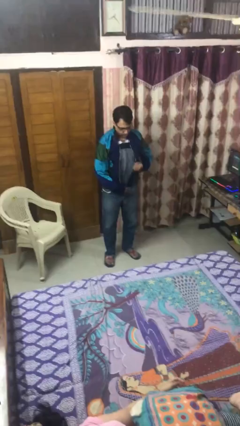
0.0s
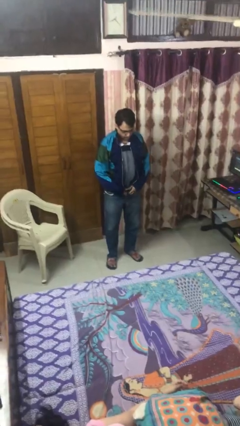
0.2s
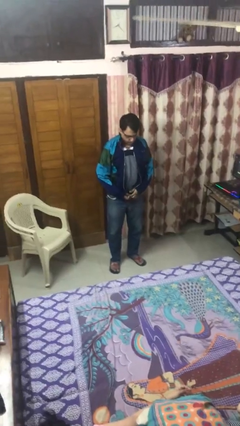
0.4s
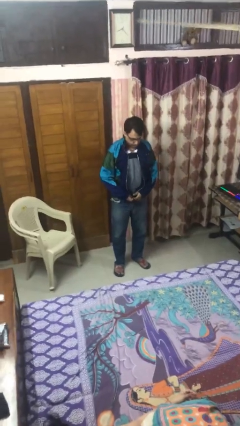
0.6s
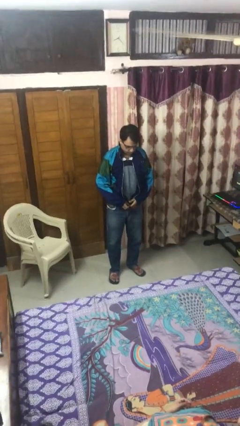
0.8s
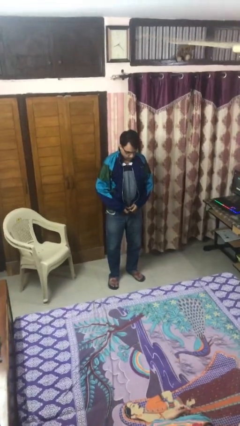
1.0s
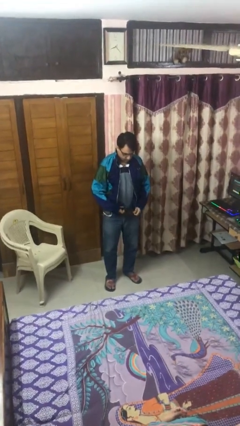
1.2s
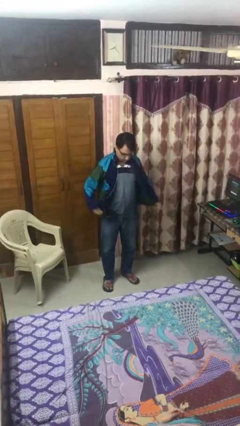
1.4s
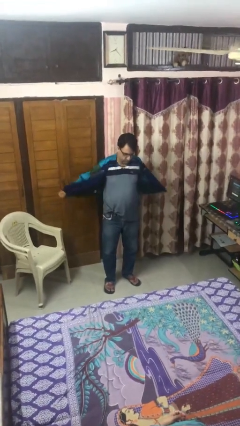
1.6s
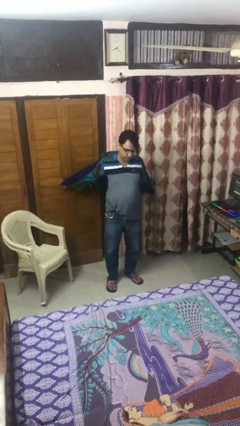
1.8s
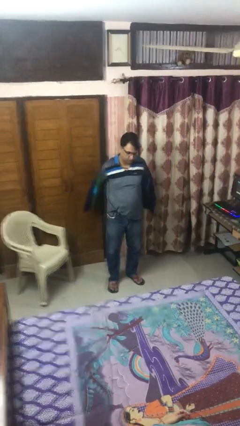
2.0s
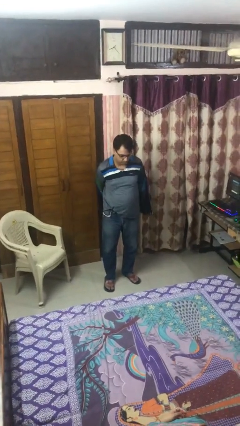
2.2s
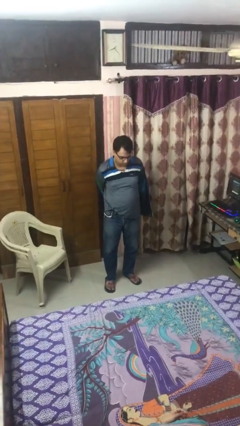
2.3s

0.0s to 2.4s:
person takes off jacket

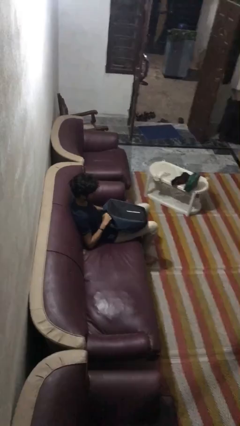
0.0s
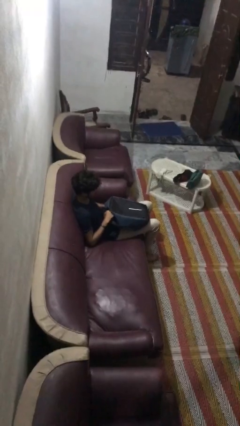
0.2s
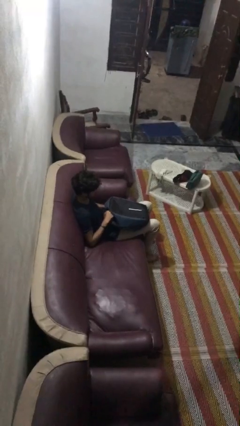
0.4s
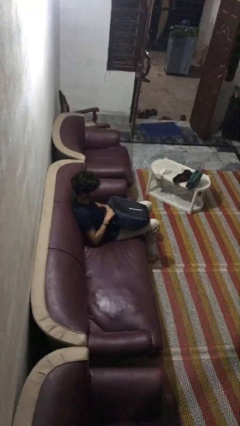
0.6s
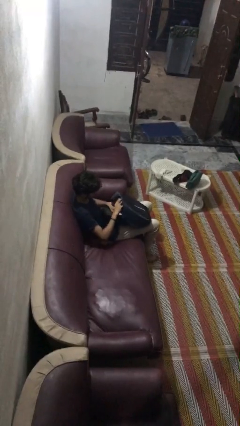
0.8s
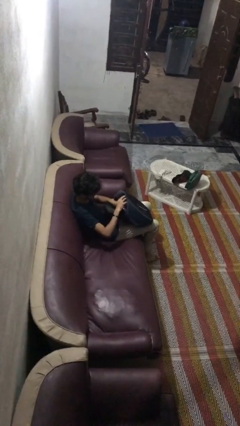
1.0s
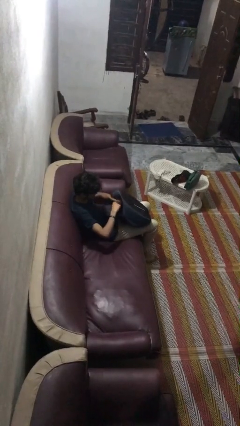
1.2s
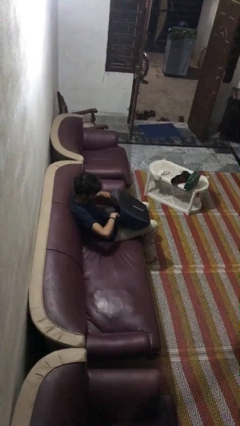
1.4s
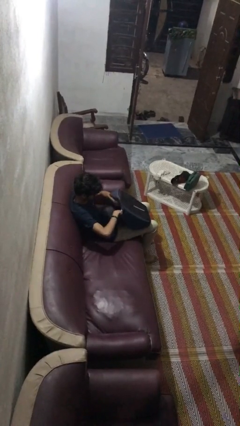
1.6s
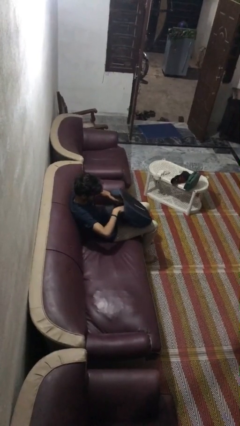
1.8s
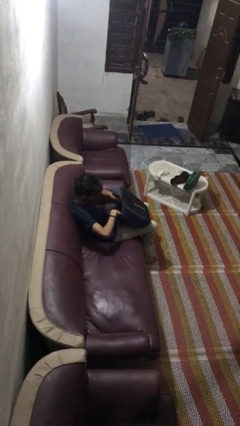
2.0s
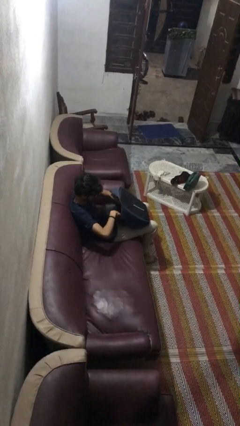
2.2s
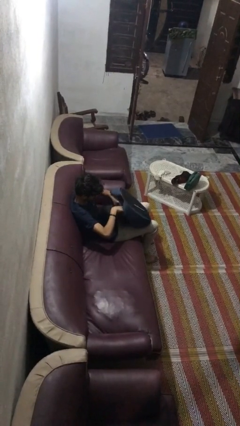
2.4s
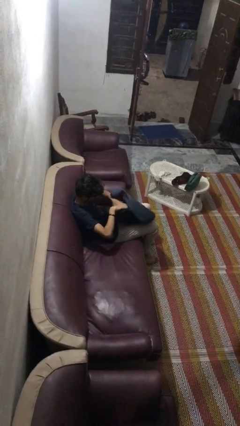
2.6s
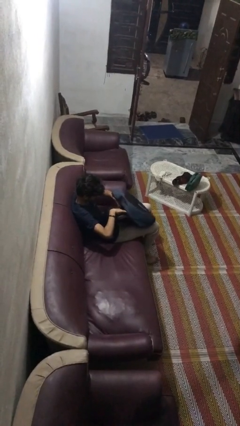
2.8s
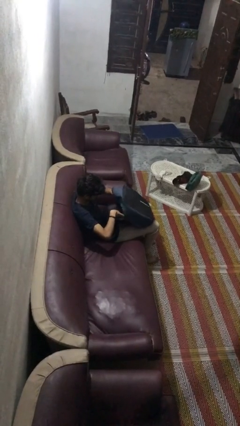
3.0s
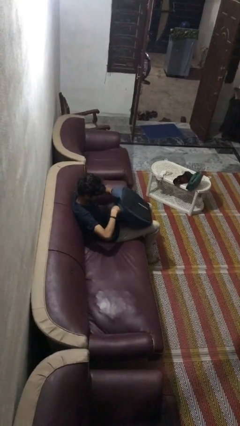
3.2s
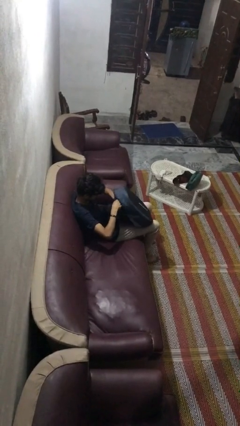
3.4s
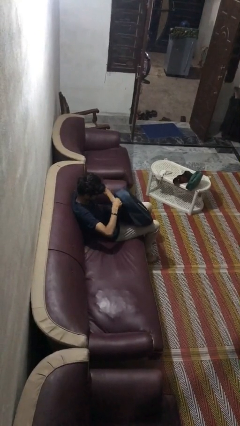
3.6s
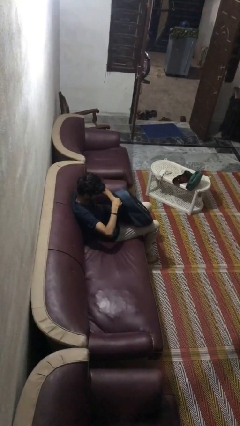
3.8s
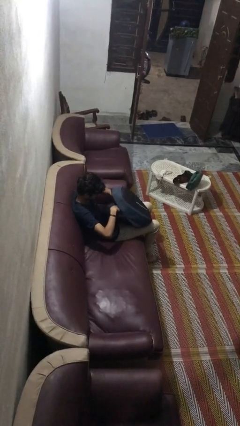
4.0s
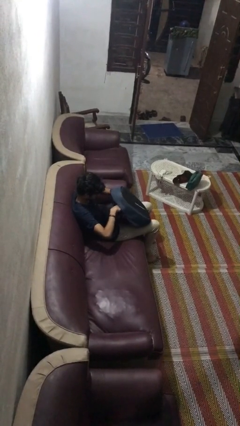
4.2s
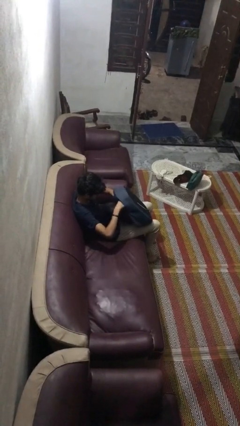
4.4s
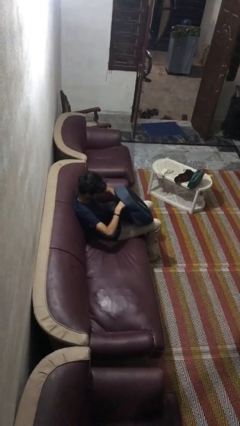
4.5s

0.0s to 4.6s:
person searches in backpack

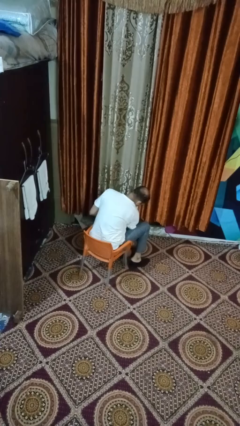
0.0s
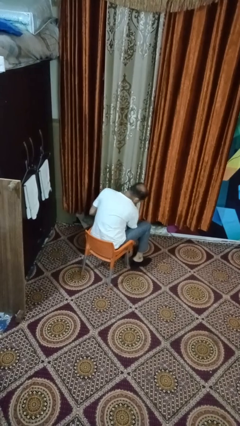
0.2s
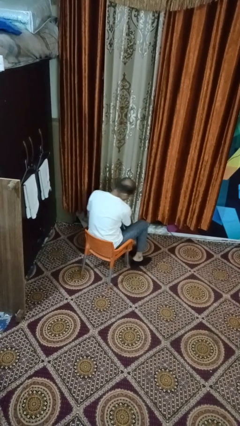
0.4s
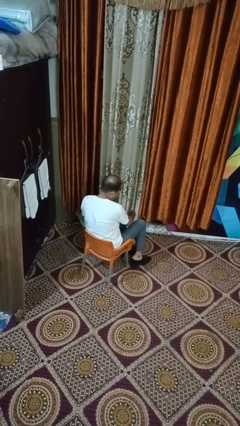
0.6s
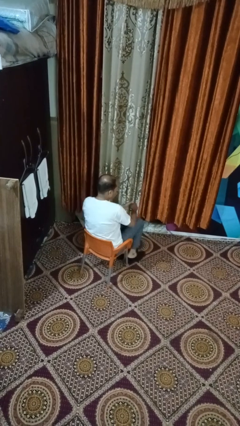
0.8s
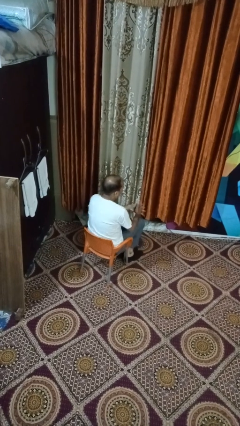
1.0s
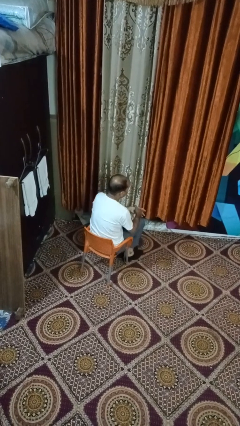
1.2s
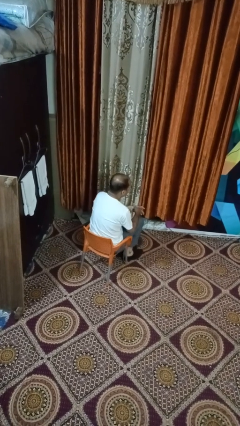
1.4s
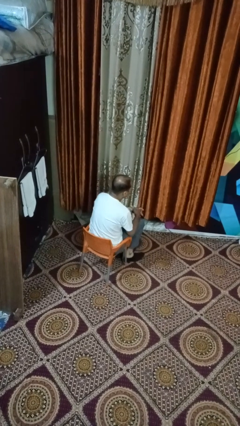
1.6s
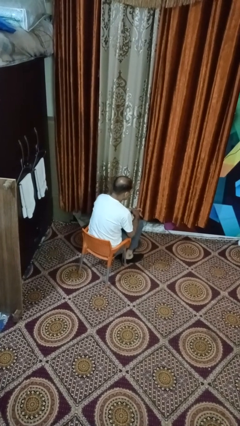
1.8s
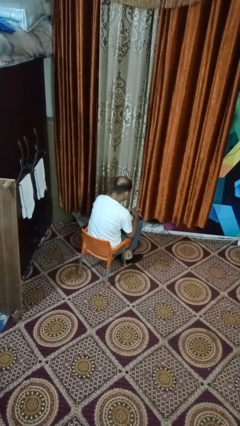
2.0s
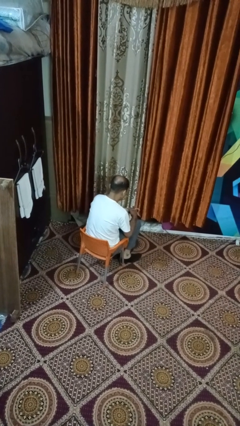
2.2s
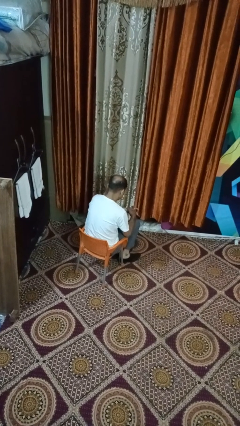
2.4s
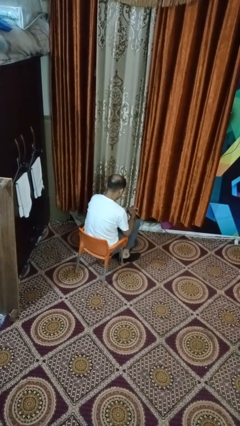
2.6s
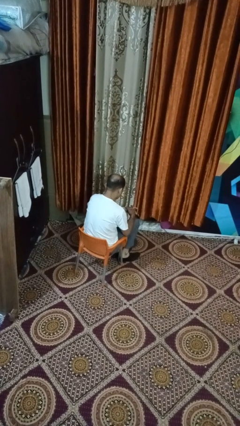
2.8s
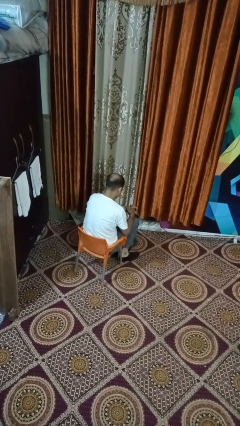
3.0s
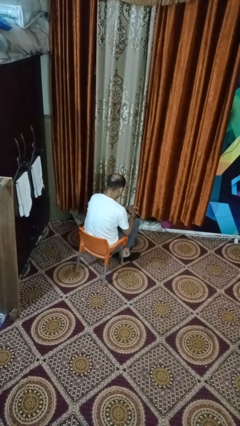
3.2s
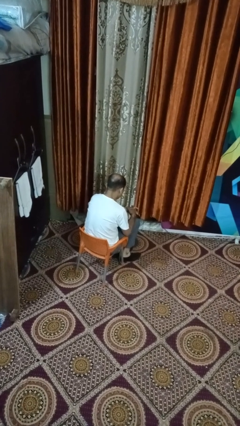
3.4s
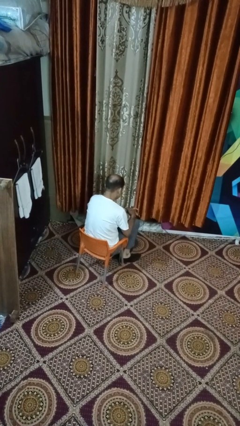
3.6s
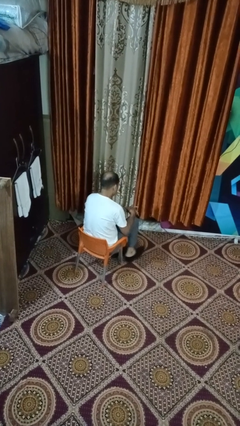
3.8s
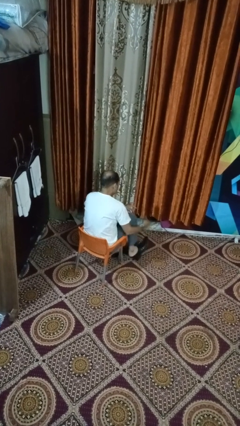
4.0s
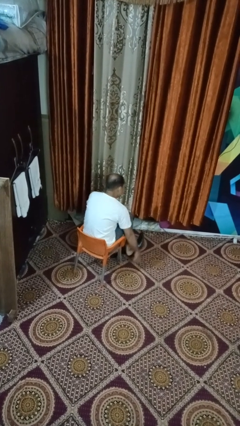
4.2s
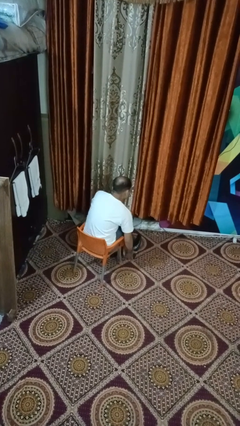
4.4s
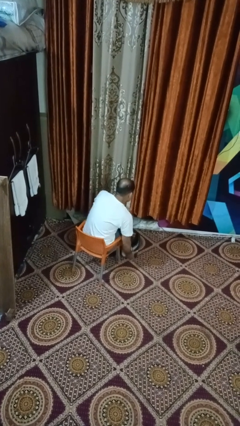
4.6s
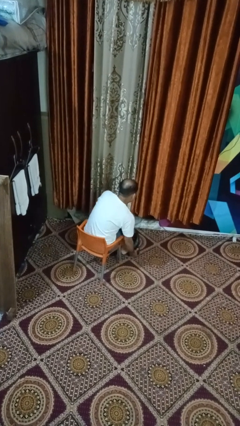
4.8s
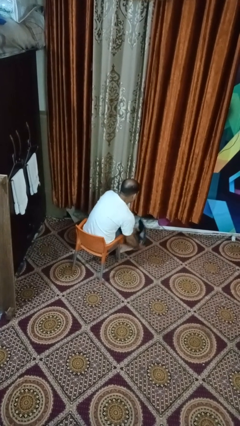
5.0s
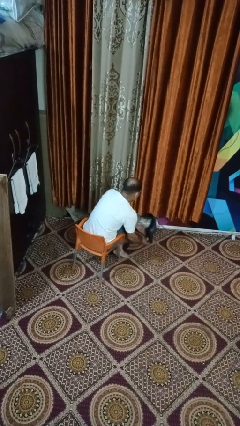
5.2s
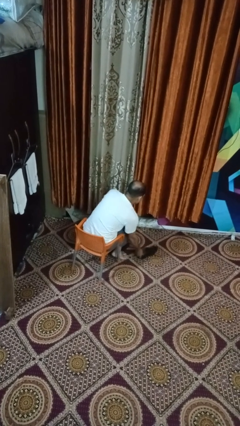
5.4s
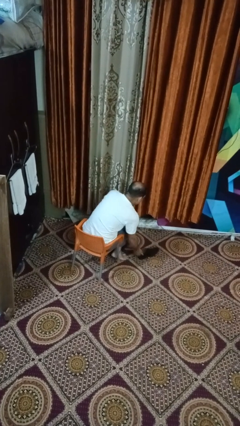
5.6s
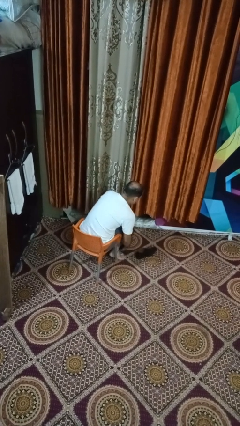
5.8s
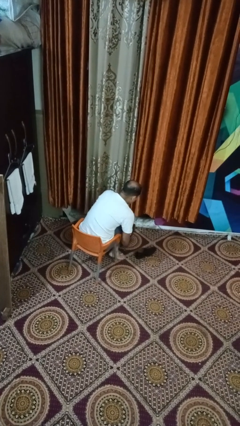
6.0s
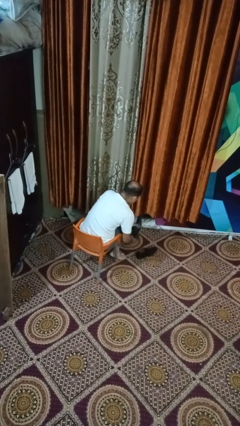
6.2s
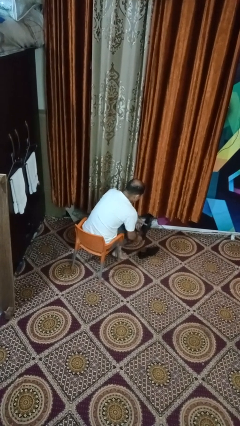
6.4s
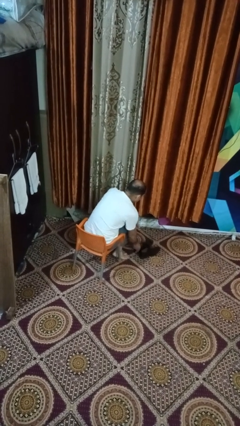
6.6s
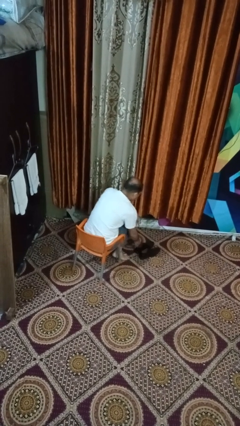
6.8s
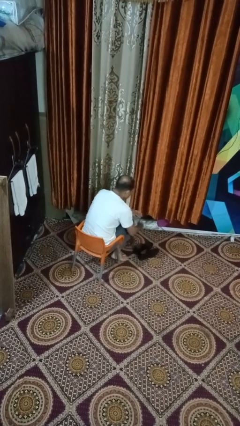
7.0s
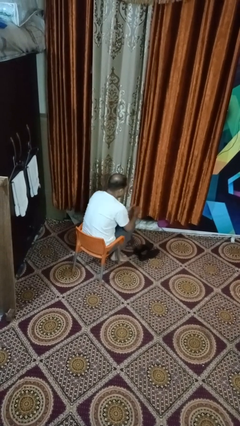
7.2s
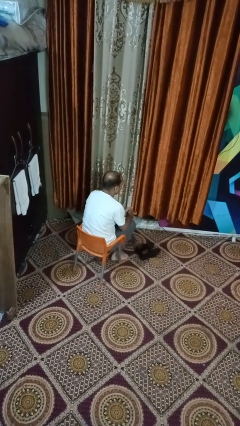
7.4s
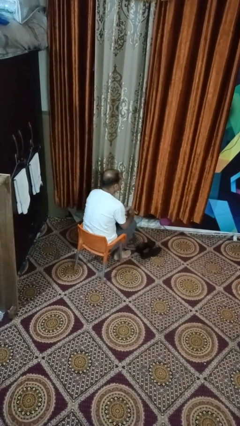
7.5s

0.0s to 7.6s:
person takes off shoes

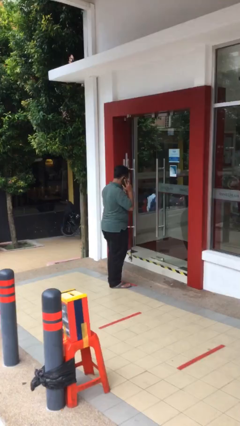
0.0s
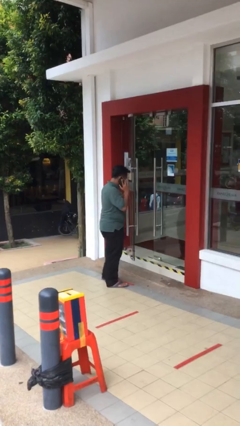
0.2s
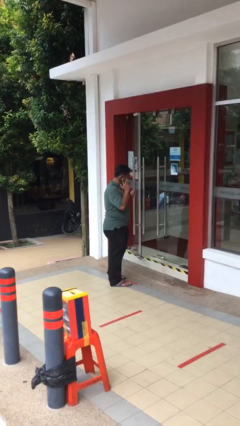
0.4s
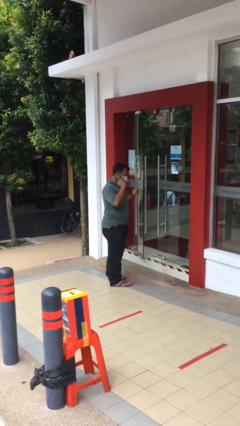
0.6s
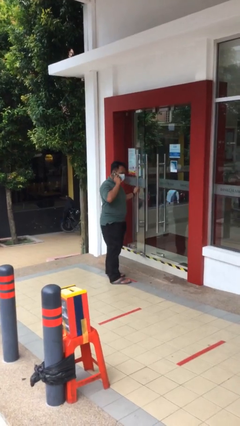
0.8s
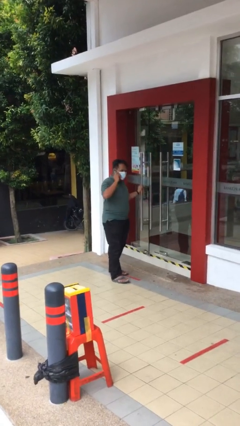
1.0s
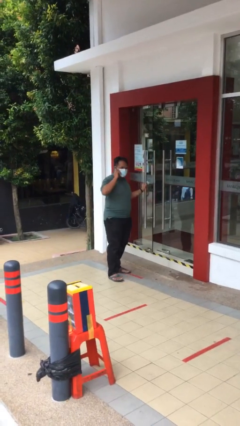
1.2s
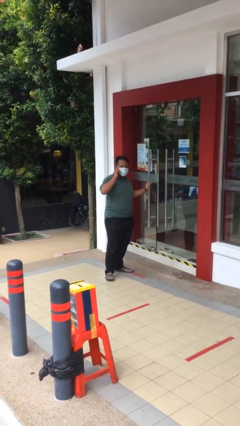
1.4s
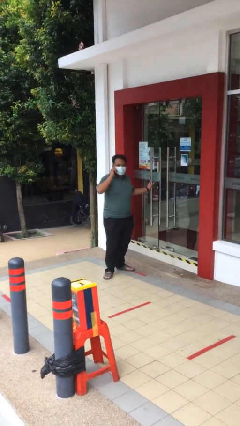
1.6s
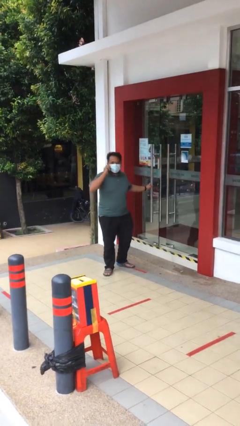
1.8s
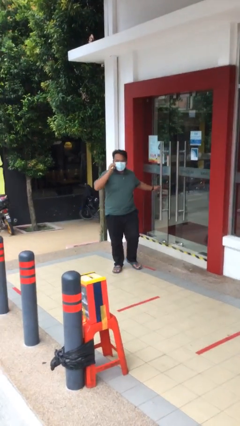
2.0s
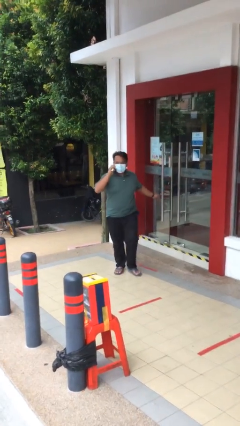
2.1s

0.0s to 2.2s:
person closes facility door

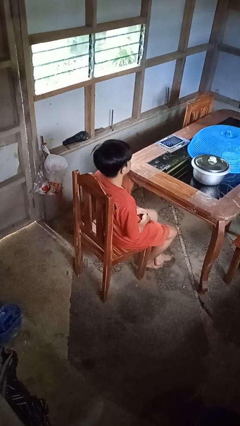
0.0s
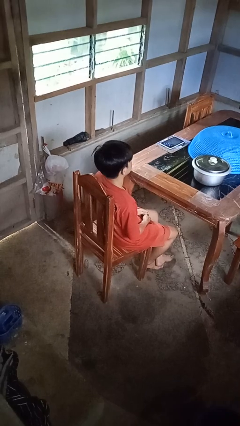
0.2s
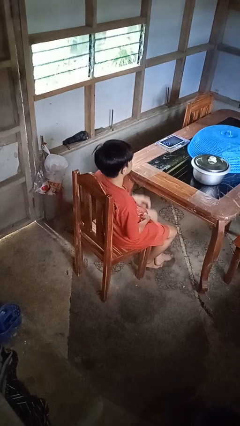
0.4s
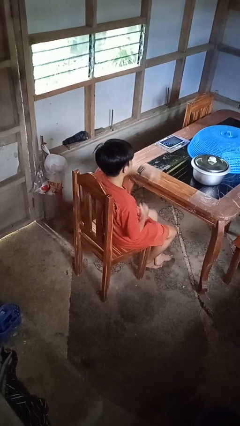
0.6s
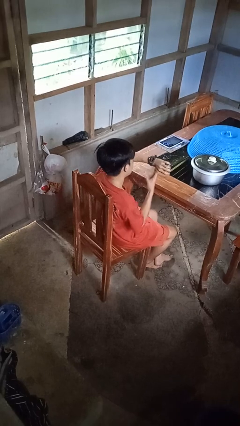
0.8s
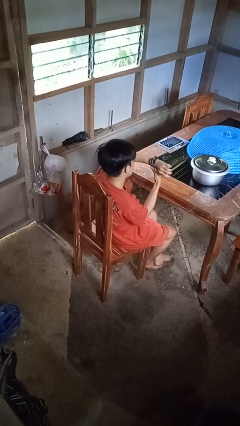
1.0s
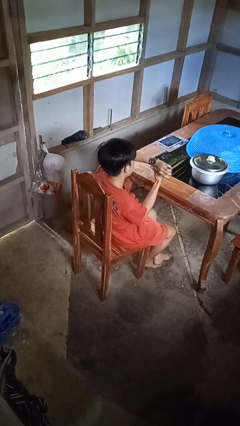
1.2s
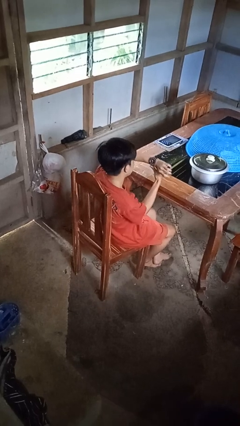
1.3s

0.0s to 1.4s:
person looks at wristwatch
